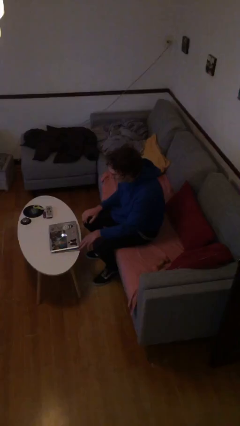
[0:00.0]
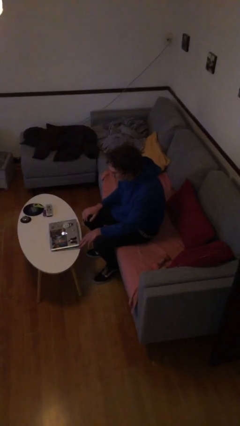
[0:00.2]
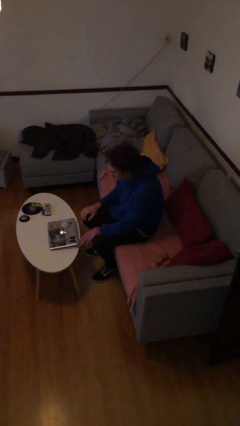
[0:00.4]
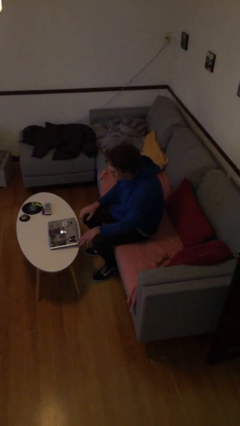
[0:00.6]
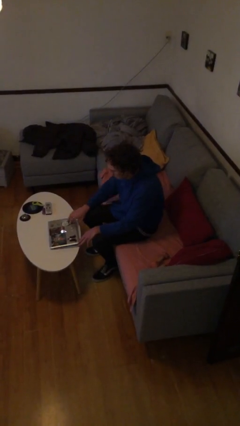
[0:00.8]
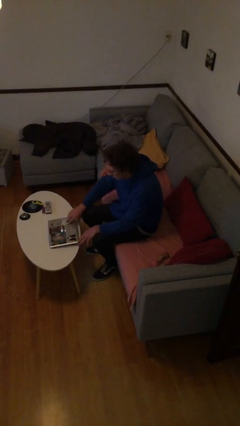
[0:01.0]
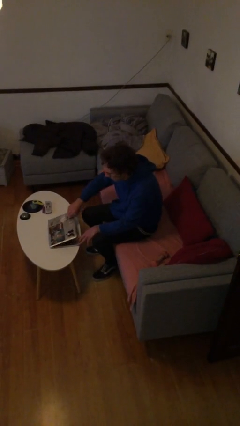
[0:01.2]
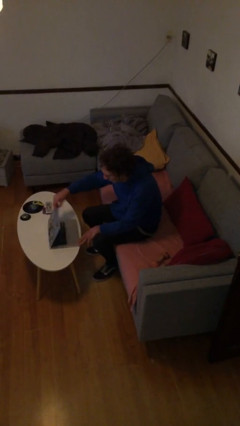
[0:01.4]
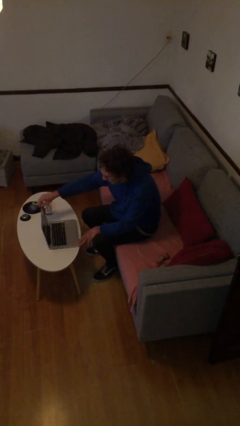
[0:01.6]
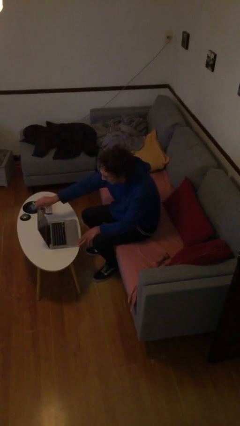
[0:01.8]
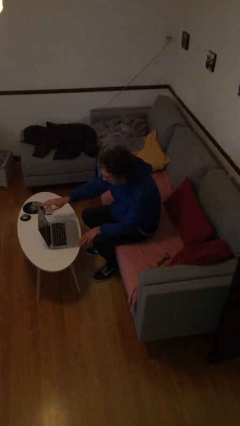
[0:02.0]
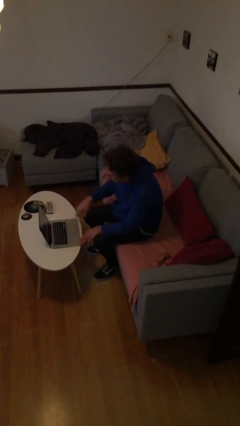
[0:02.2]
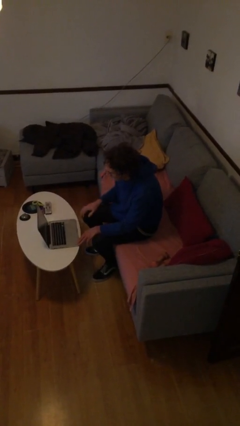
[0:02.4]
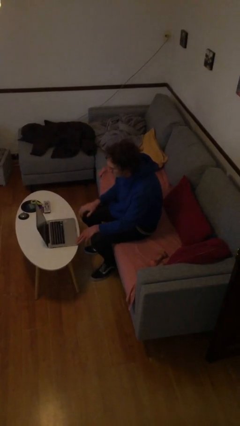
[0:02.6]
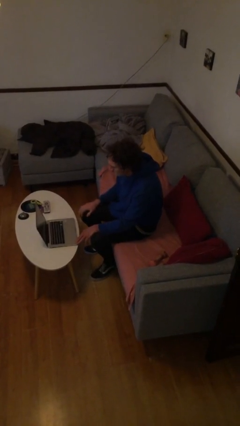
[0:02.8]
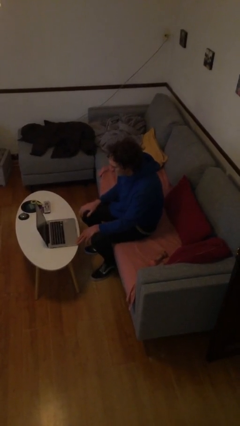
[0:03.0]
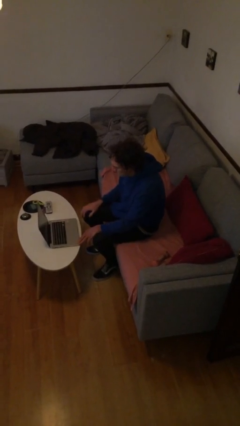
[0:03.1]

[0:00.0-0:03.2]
person opens laptop

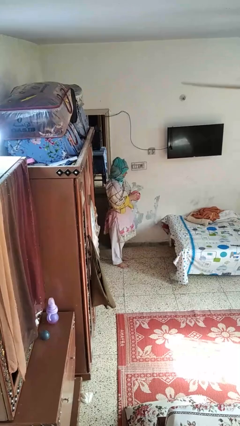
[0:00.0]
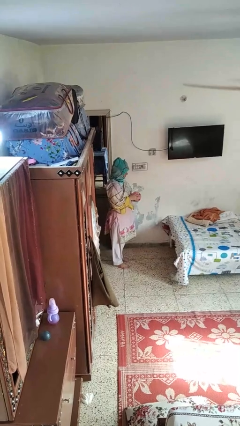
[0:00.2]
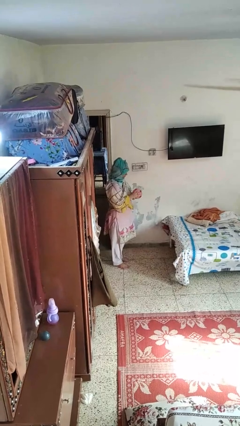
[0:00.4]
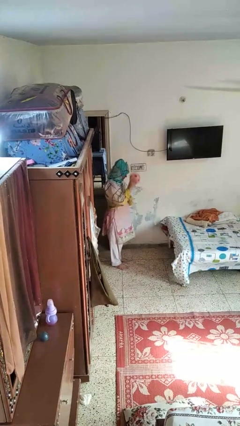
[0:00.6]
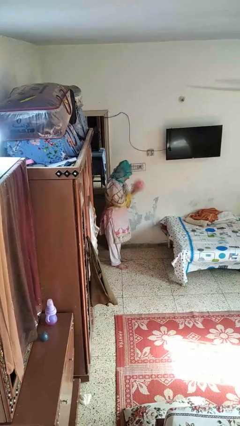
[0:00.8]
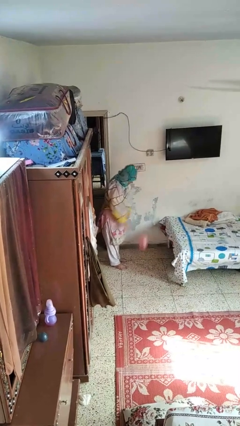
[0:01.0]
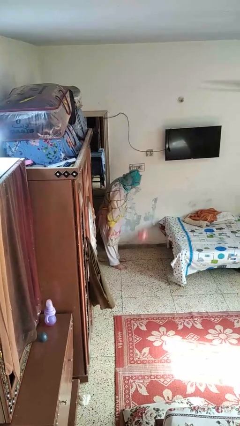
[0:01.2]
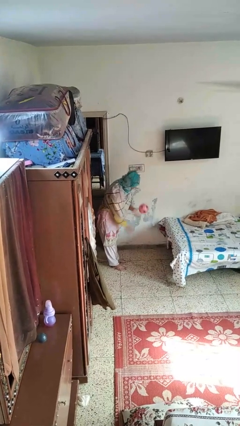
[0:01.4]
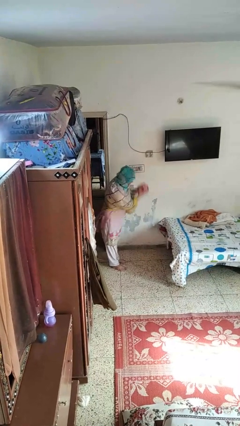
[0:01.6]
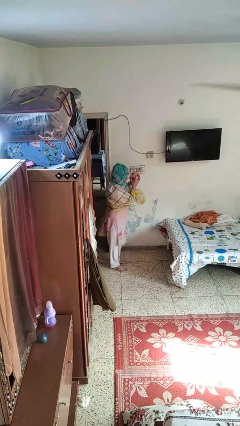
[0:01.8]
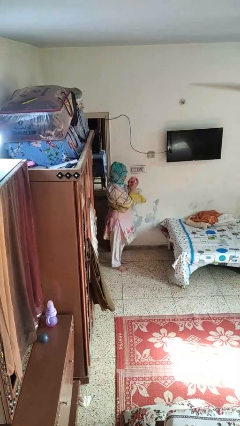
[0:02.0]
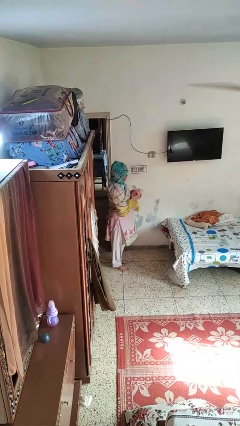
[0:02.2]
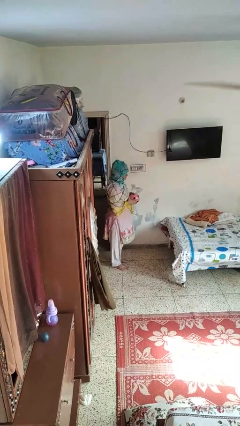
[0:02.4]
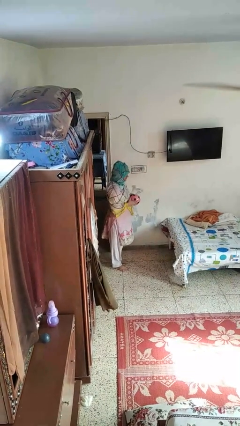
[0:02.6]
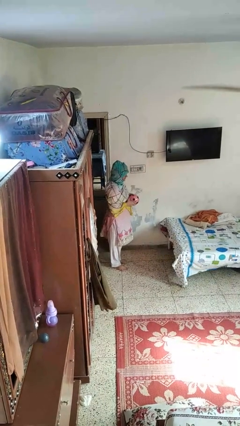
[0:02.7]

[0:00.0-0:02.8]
person bounces ball on floor

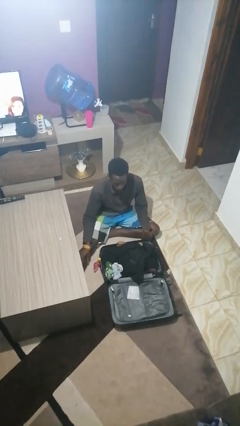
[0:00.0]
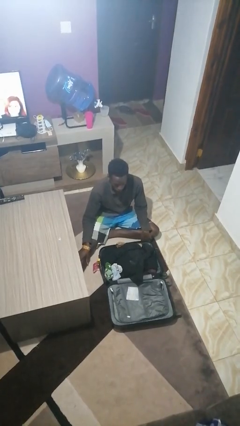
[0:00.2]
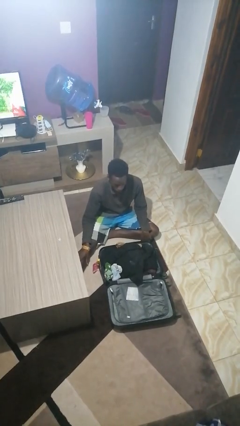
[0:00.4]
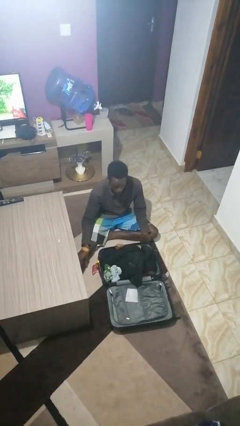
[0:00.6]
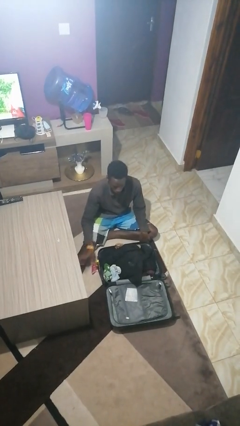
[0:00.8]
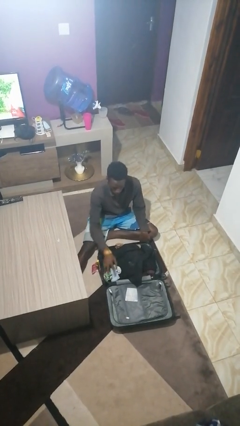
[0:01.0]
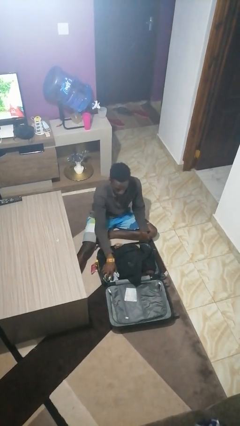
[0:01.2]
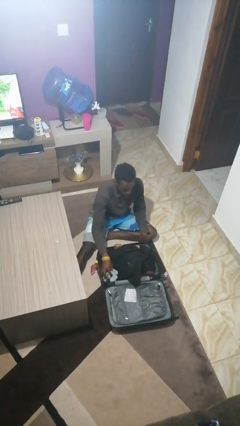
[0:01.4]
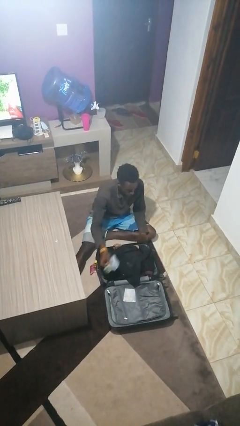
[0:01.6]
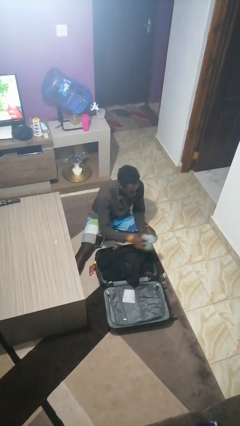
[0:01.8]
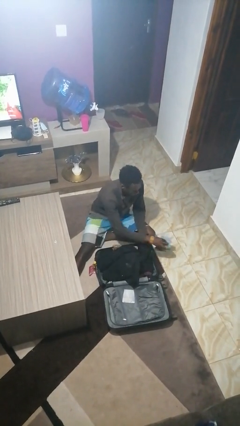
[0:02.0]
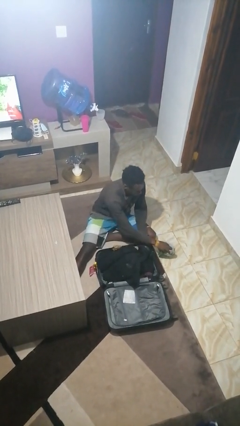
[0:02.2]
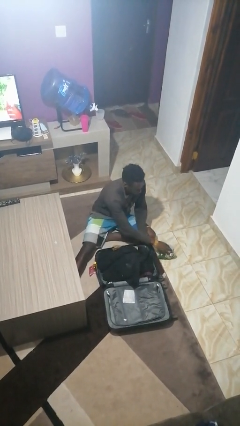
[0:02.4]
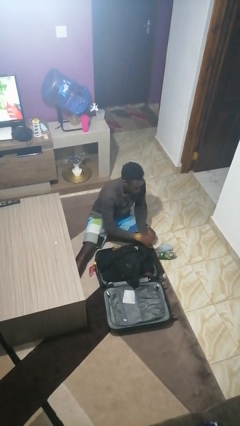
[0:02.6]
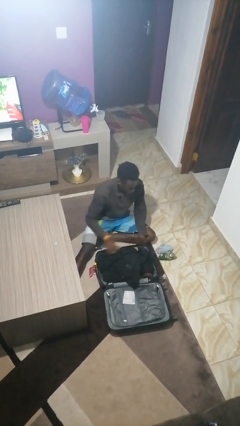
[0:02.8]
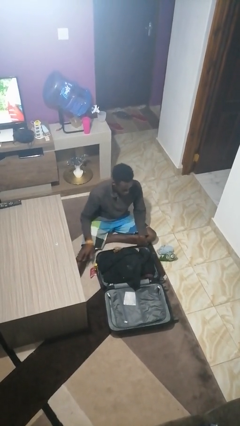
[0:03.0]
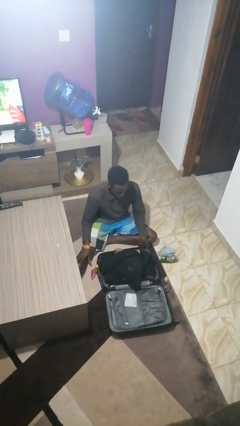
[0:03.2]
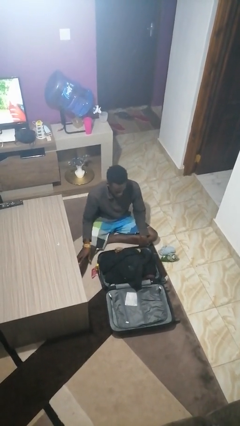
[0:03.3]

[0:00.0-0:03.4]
person unloads clothes from suitcase

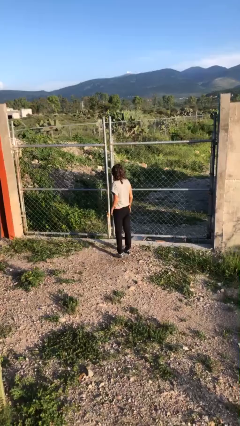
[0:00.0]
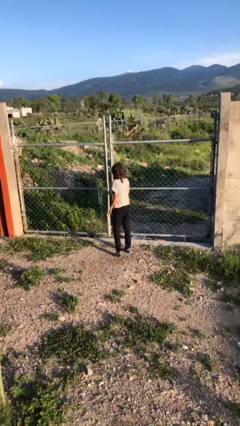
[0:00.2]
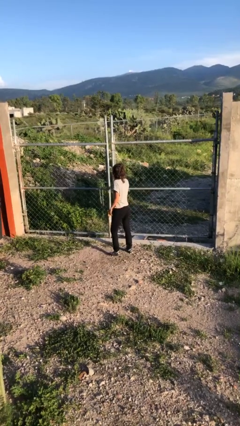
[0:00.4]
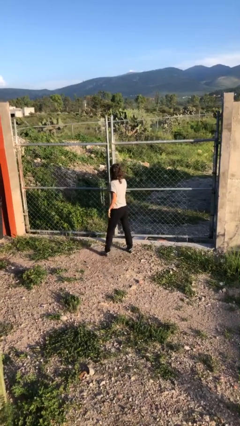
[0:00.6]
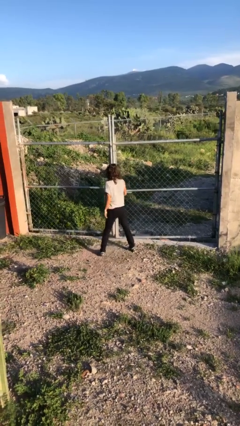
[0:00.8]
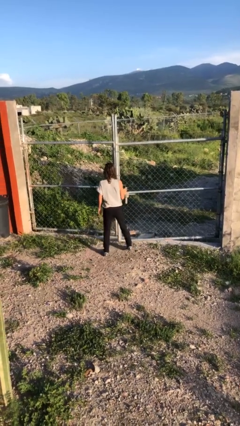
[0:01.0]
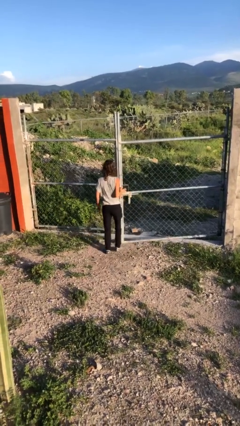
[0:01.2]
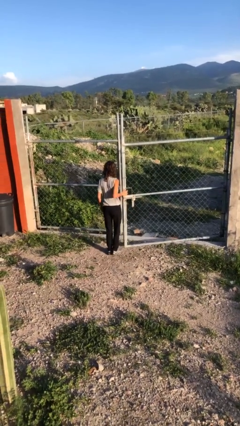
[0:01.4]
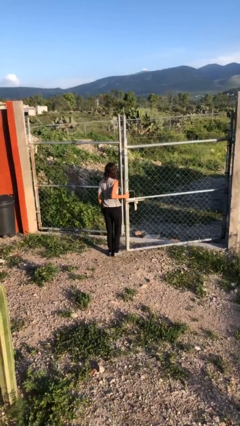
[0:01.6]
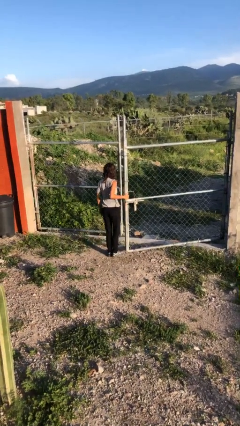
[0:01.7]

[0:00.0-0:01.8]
person opens gate

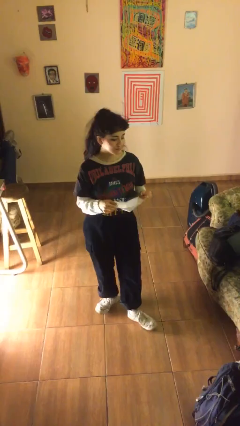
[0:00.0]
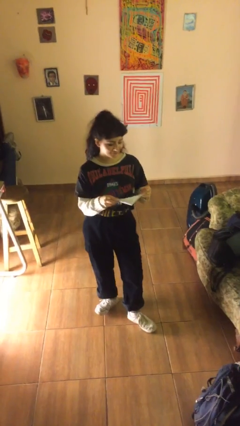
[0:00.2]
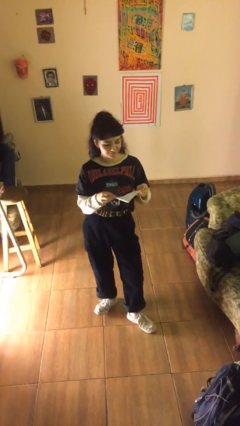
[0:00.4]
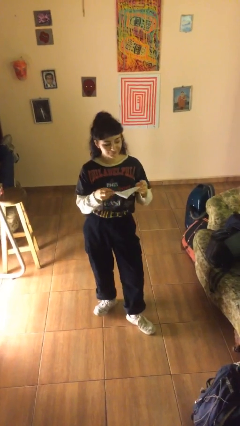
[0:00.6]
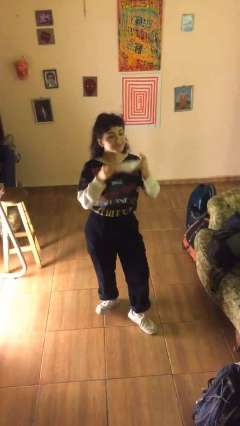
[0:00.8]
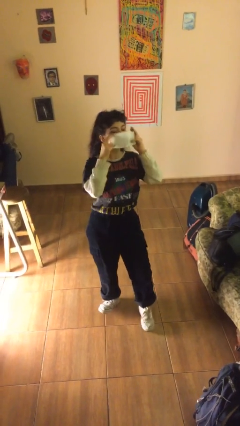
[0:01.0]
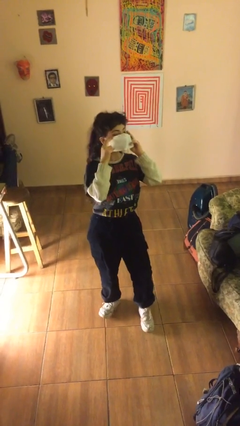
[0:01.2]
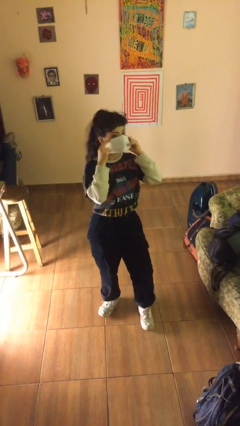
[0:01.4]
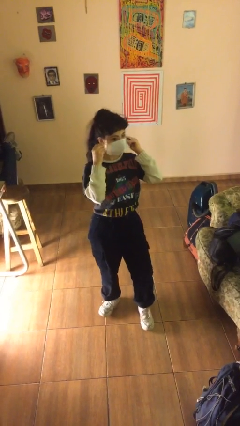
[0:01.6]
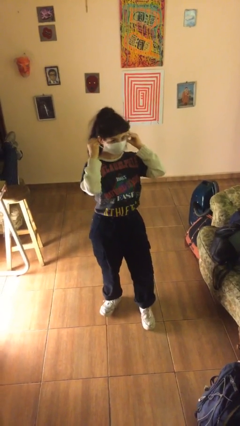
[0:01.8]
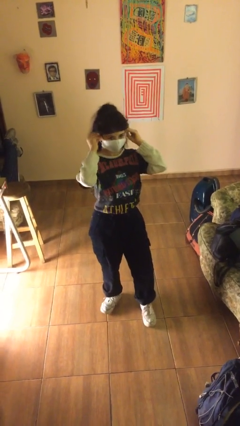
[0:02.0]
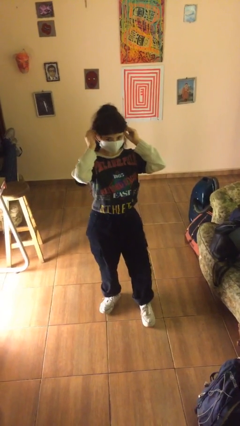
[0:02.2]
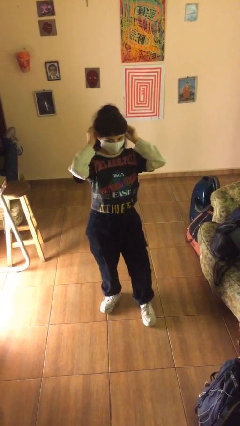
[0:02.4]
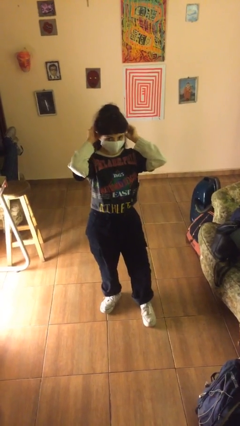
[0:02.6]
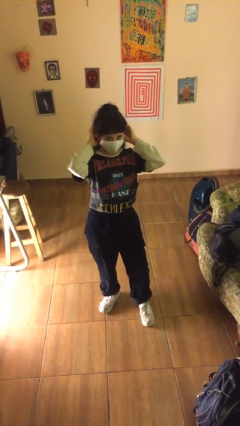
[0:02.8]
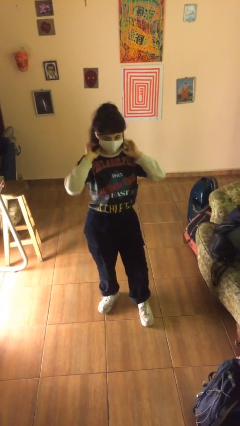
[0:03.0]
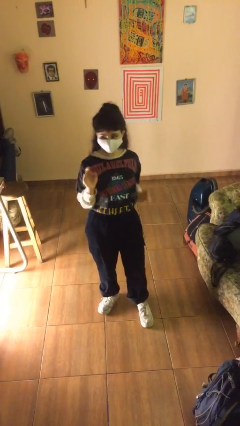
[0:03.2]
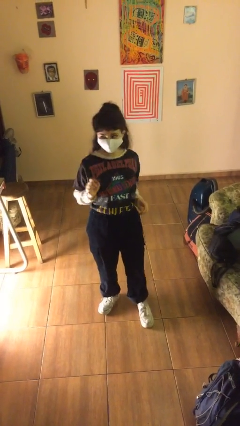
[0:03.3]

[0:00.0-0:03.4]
person puts on facemask

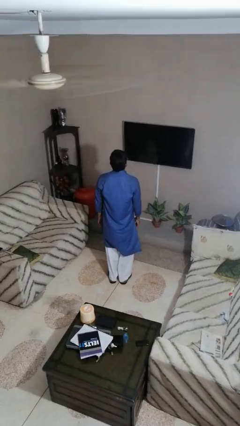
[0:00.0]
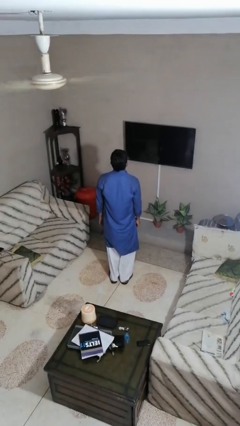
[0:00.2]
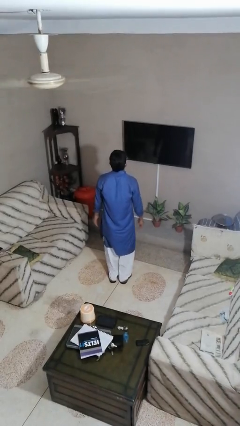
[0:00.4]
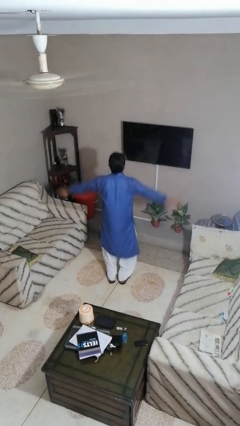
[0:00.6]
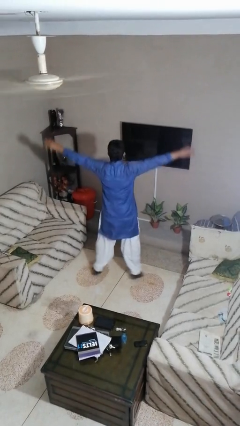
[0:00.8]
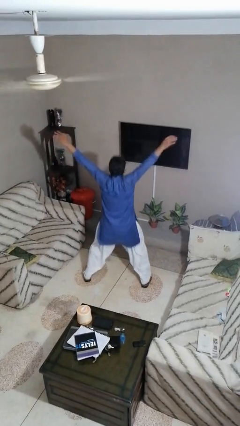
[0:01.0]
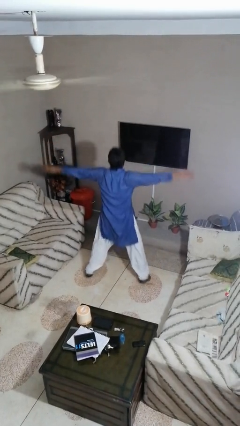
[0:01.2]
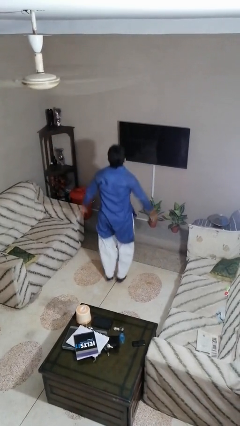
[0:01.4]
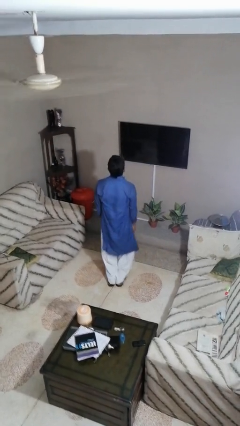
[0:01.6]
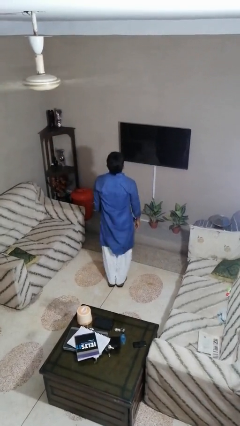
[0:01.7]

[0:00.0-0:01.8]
person exercises with jumping jacks

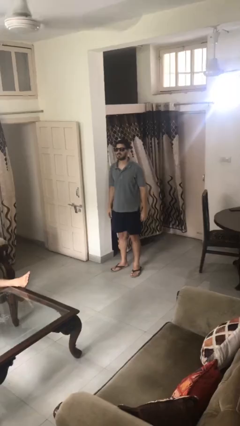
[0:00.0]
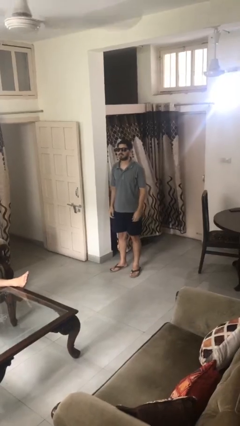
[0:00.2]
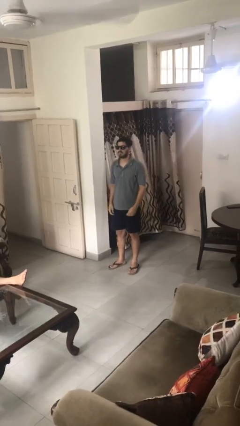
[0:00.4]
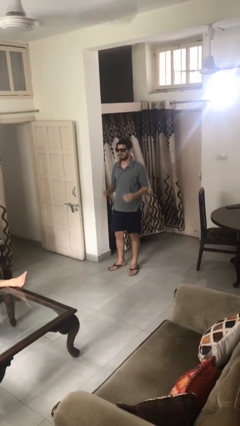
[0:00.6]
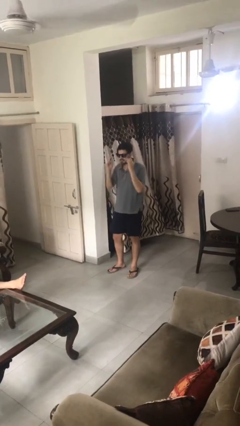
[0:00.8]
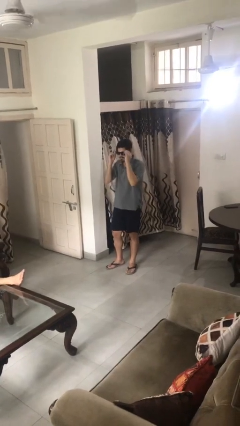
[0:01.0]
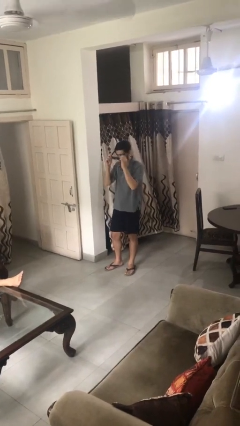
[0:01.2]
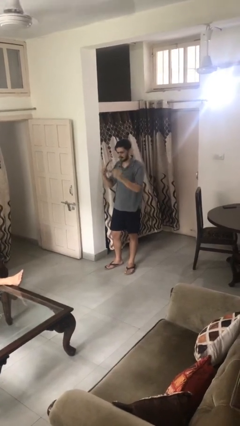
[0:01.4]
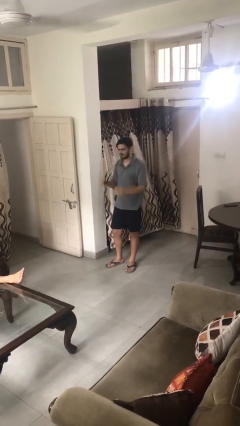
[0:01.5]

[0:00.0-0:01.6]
person takes off sunglasses
